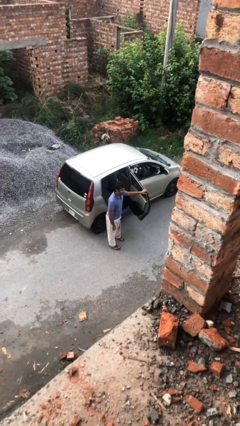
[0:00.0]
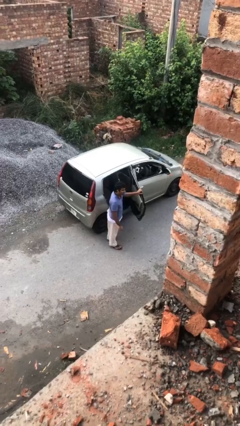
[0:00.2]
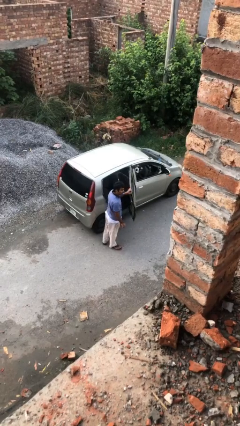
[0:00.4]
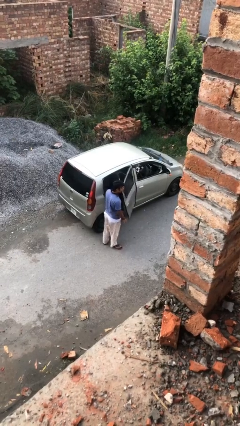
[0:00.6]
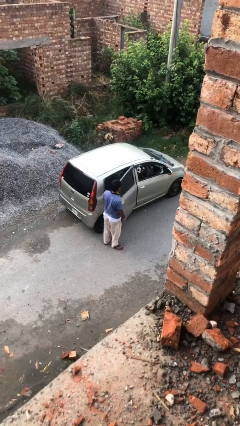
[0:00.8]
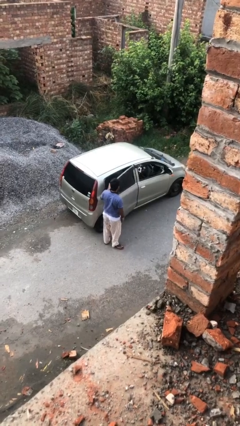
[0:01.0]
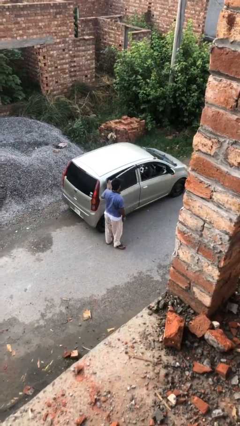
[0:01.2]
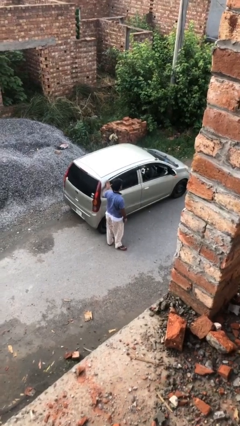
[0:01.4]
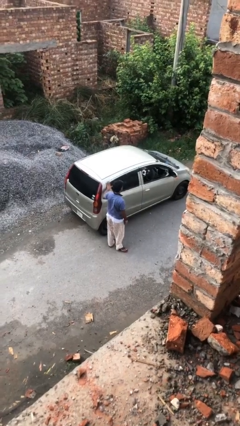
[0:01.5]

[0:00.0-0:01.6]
person closes car door

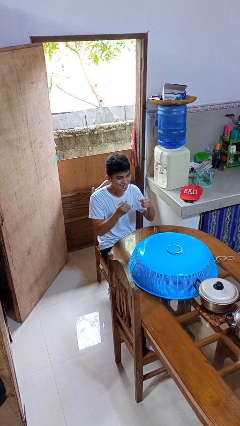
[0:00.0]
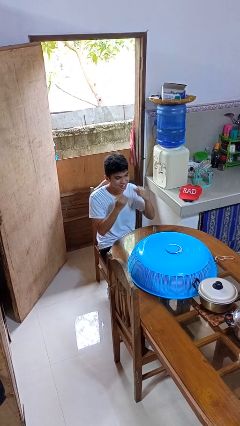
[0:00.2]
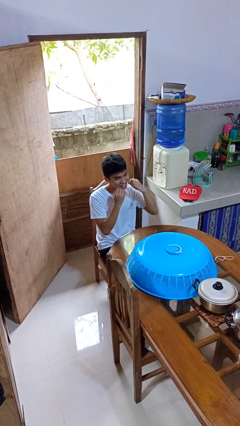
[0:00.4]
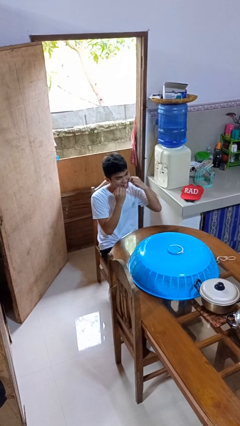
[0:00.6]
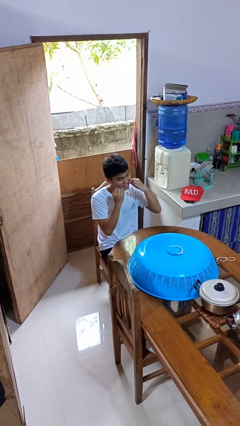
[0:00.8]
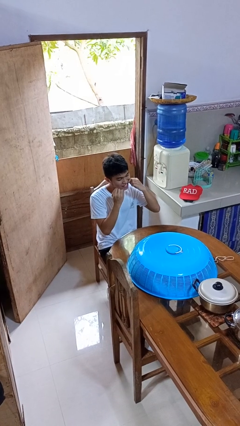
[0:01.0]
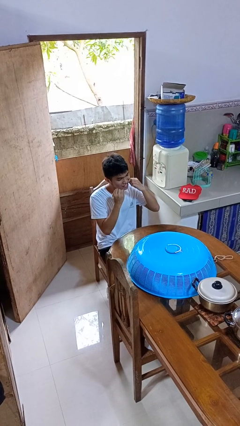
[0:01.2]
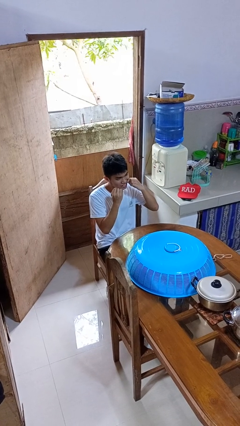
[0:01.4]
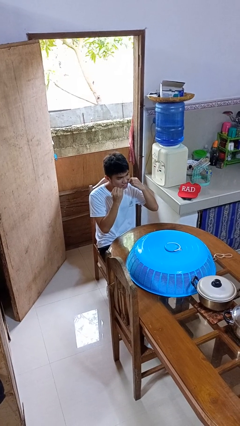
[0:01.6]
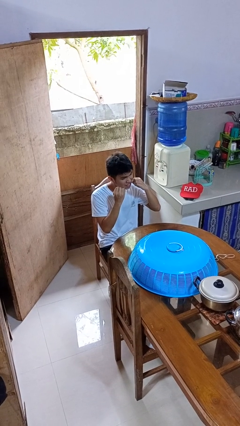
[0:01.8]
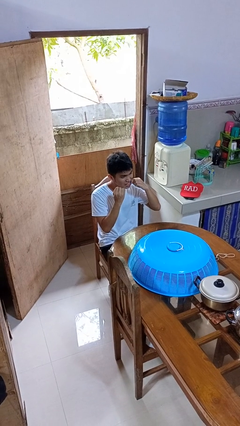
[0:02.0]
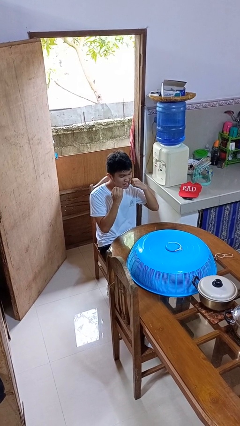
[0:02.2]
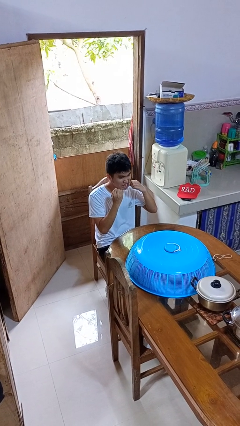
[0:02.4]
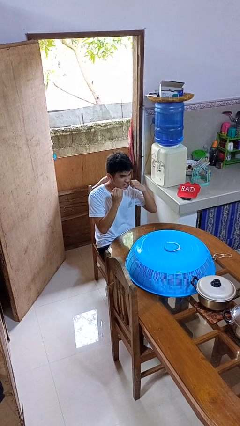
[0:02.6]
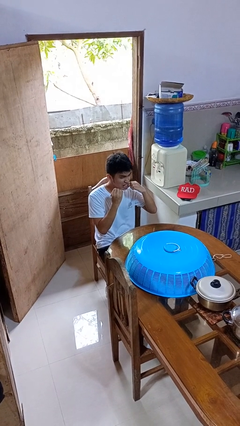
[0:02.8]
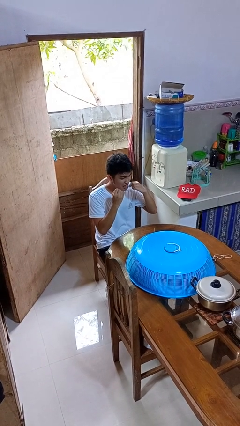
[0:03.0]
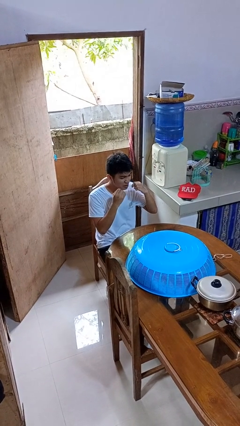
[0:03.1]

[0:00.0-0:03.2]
person flosses

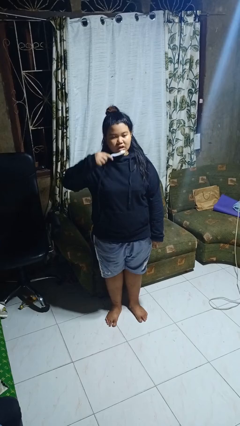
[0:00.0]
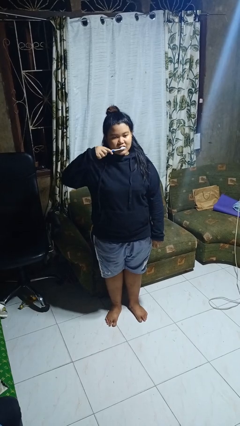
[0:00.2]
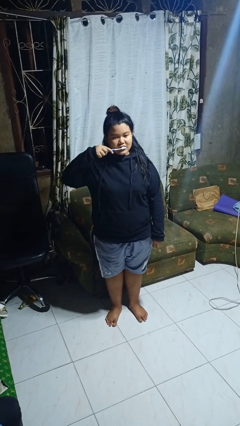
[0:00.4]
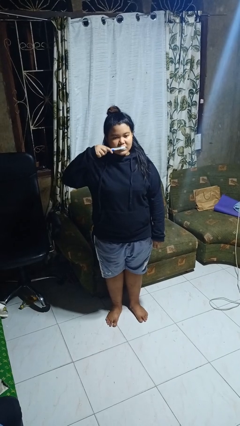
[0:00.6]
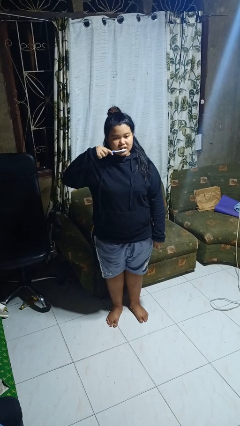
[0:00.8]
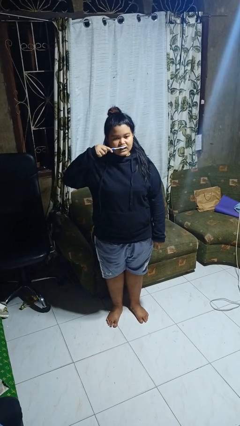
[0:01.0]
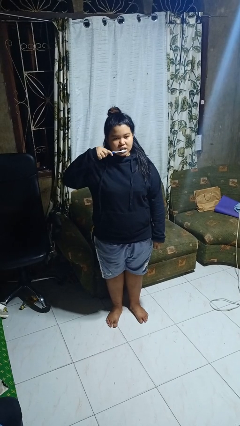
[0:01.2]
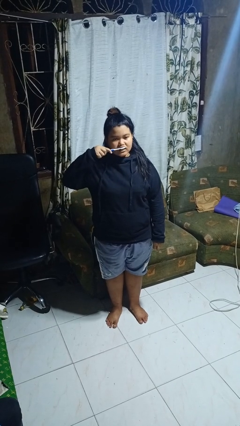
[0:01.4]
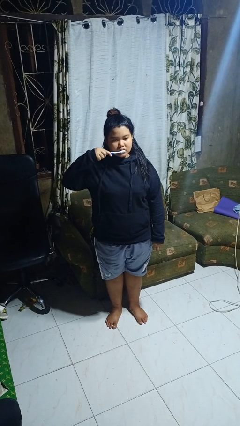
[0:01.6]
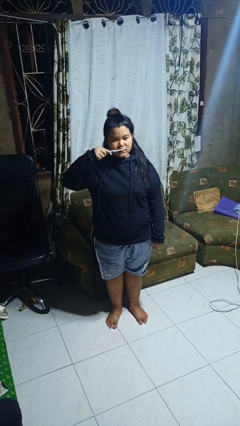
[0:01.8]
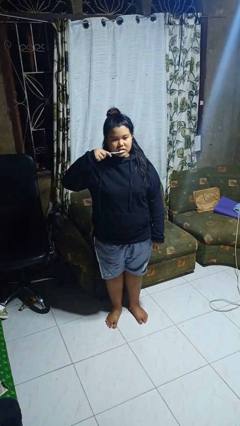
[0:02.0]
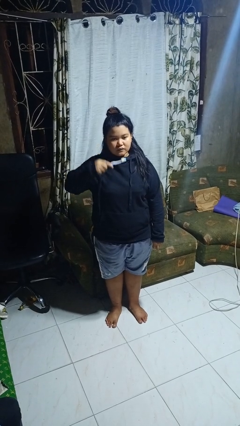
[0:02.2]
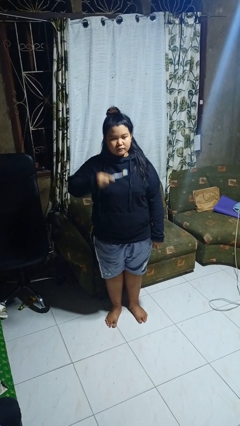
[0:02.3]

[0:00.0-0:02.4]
person brushes teeth

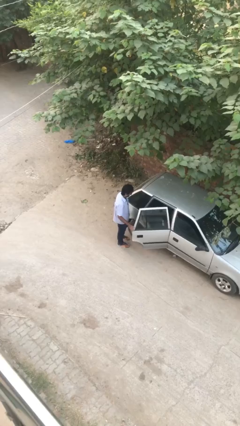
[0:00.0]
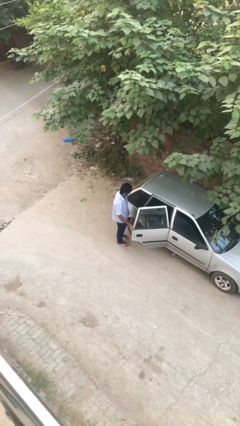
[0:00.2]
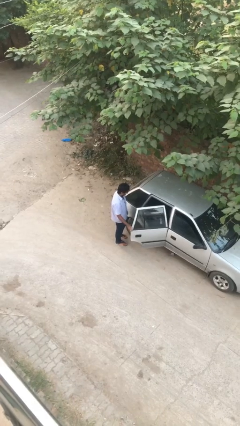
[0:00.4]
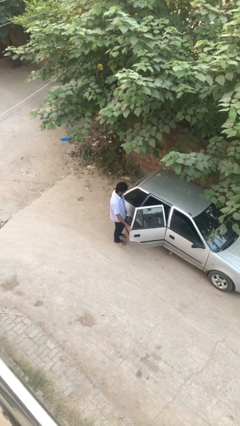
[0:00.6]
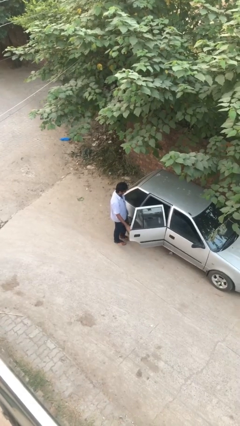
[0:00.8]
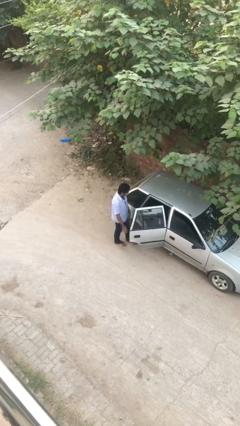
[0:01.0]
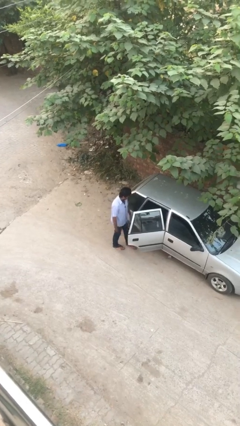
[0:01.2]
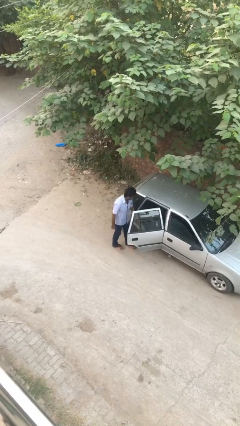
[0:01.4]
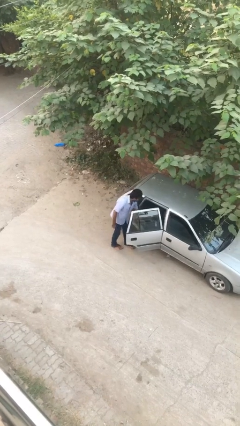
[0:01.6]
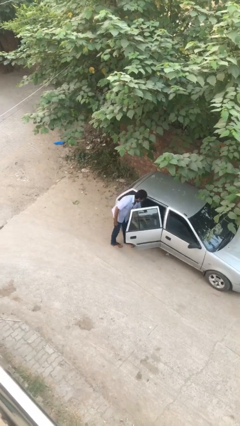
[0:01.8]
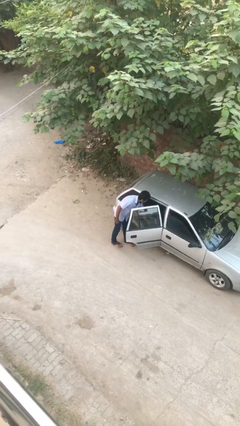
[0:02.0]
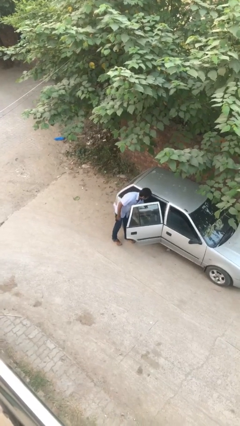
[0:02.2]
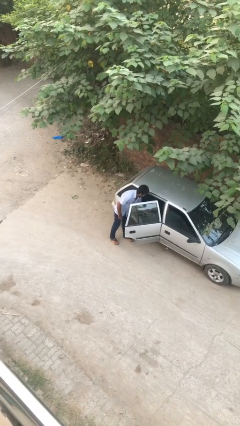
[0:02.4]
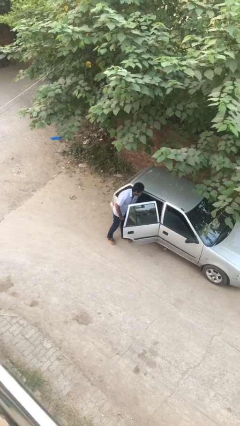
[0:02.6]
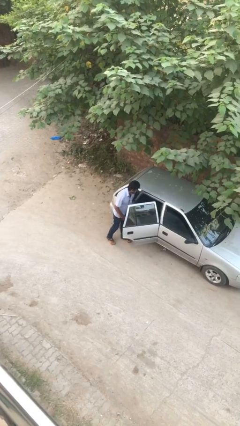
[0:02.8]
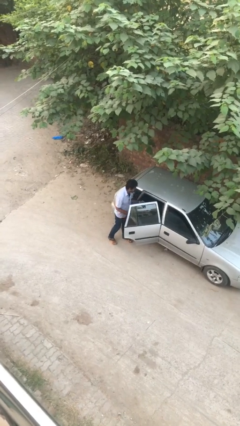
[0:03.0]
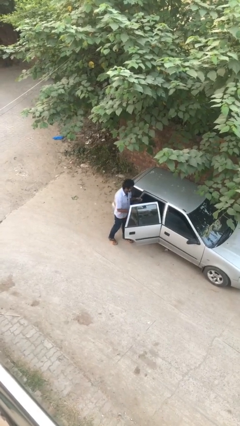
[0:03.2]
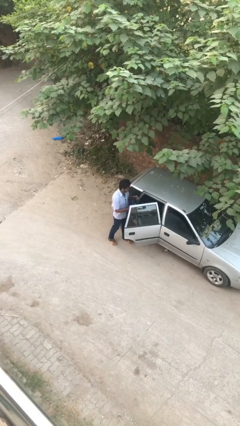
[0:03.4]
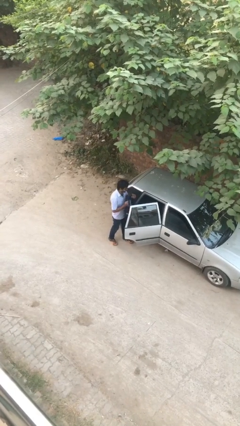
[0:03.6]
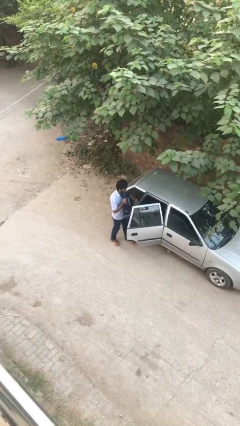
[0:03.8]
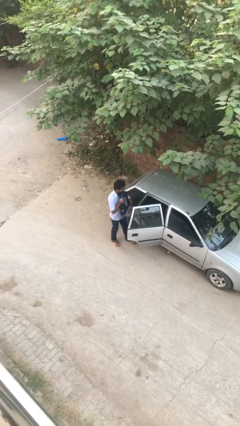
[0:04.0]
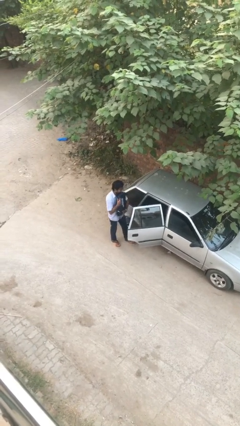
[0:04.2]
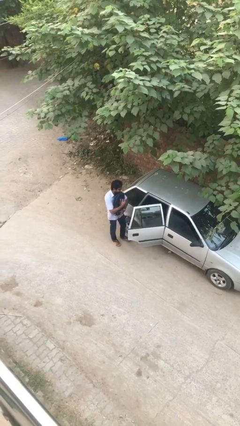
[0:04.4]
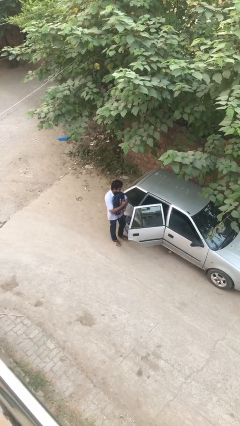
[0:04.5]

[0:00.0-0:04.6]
person unloads car

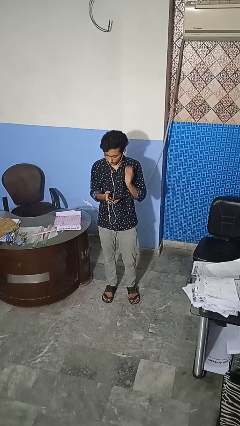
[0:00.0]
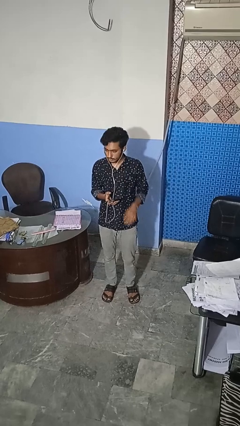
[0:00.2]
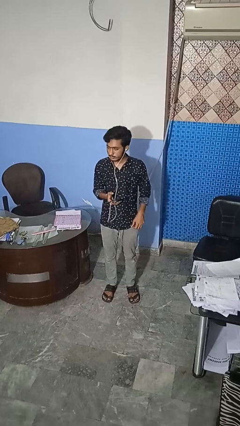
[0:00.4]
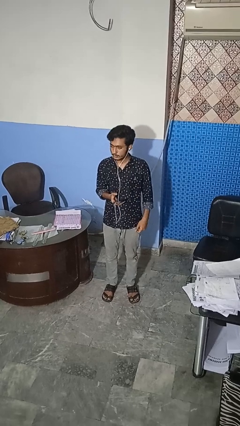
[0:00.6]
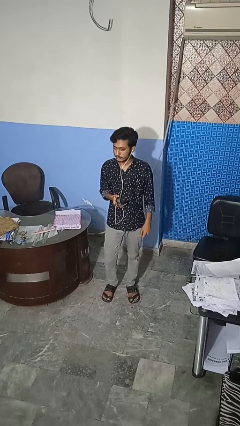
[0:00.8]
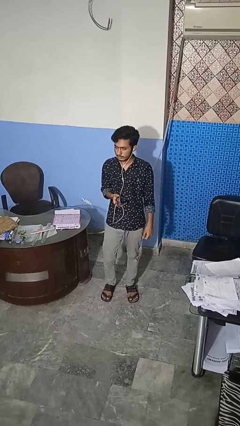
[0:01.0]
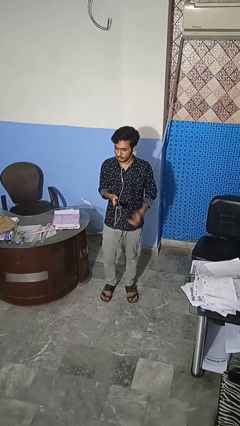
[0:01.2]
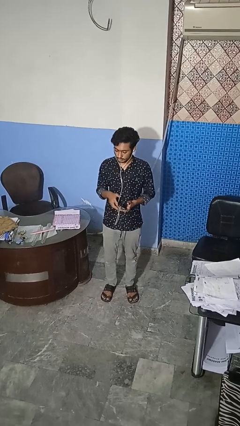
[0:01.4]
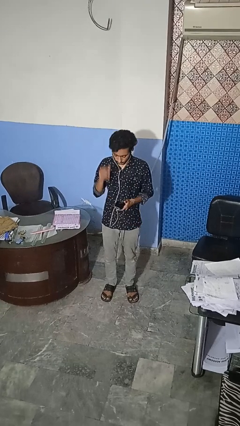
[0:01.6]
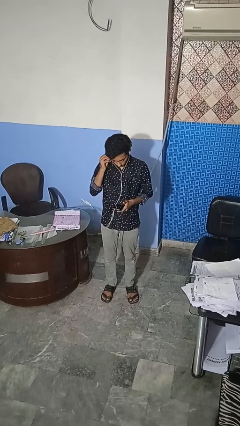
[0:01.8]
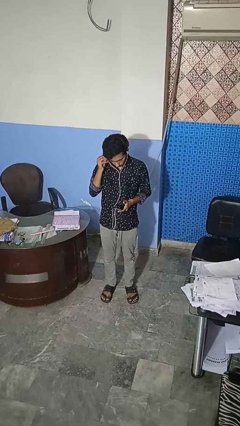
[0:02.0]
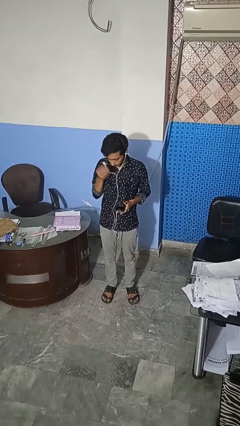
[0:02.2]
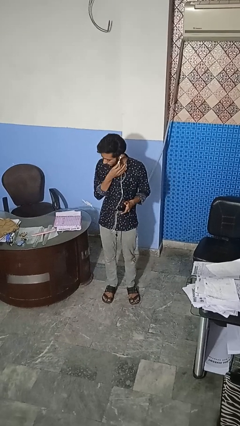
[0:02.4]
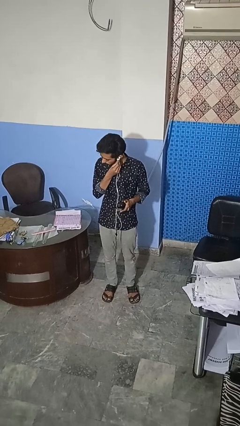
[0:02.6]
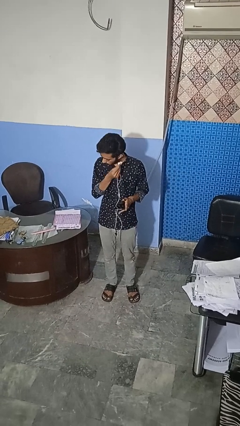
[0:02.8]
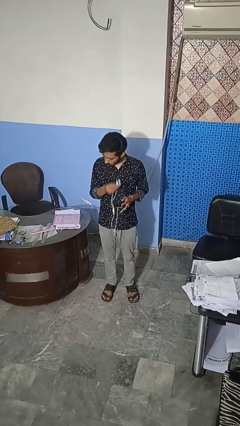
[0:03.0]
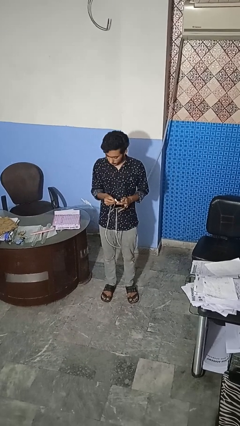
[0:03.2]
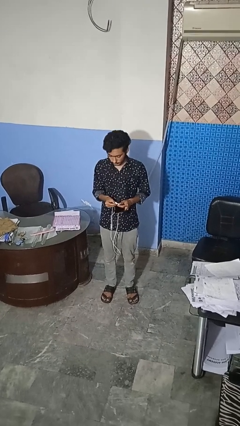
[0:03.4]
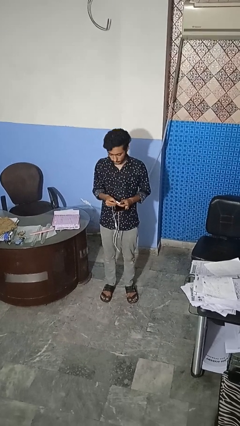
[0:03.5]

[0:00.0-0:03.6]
person takes off headphones

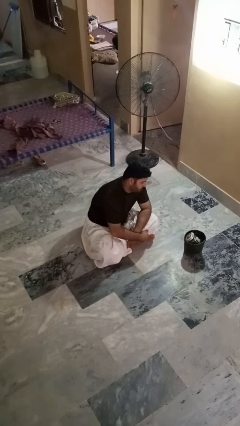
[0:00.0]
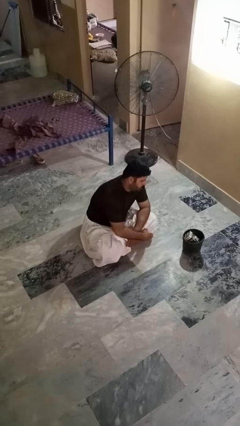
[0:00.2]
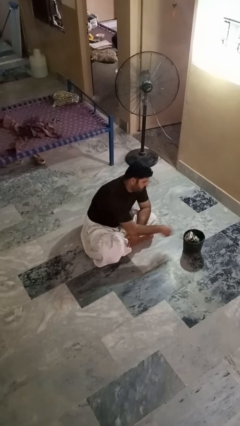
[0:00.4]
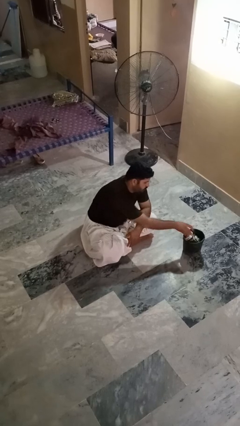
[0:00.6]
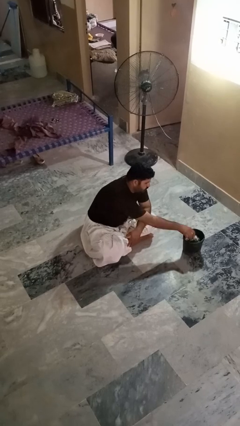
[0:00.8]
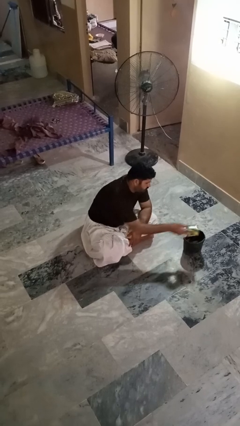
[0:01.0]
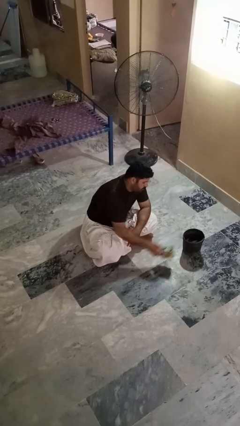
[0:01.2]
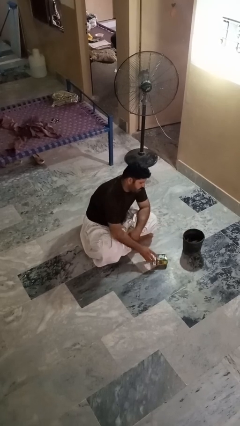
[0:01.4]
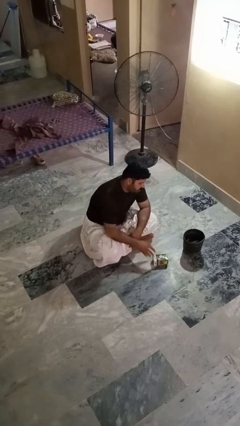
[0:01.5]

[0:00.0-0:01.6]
person takes object from basket

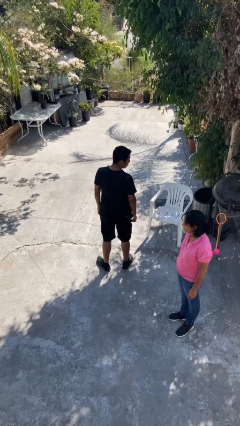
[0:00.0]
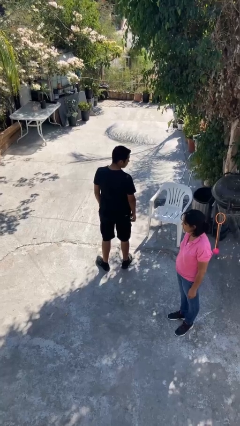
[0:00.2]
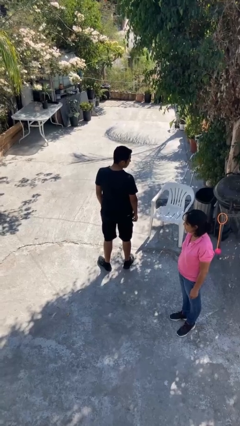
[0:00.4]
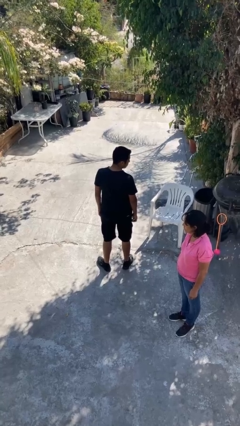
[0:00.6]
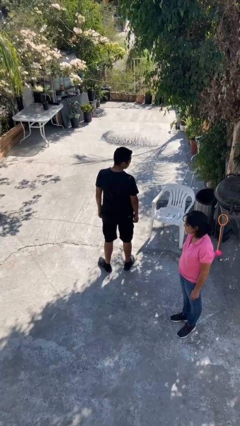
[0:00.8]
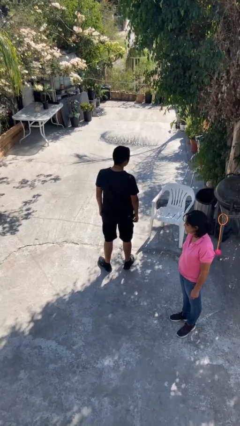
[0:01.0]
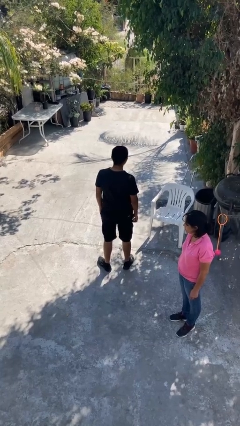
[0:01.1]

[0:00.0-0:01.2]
person looks over shoulder
